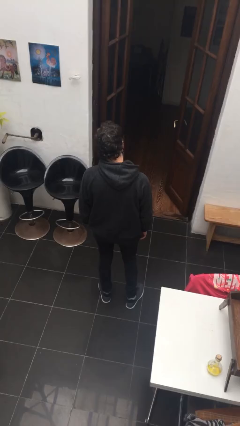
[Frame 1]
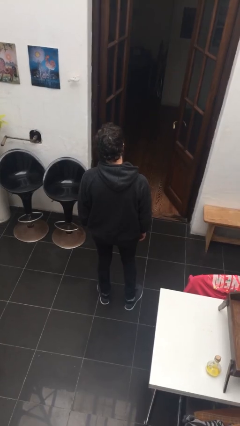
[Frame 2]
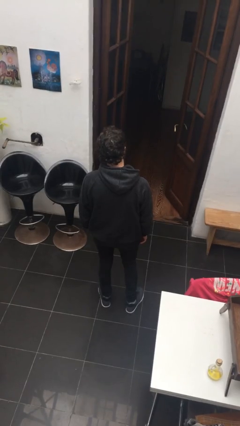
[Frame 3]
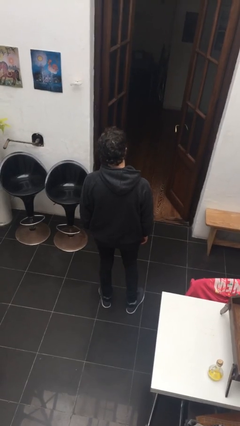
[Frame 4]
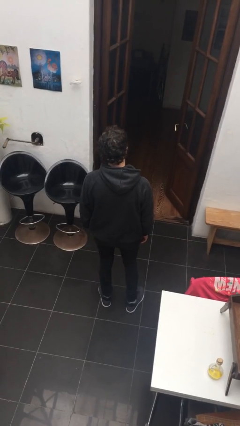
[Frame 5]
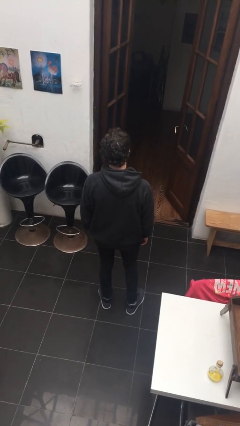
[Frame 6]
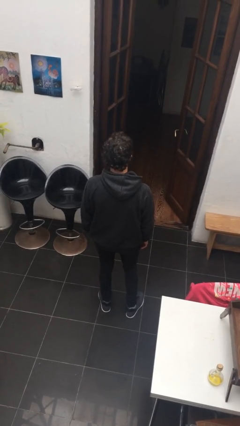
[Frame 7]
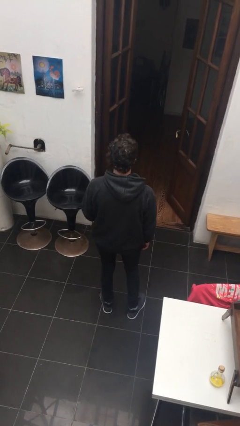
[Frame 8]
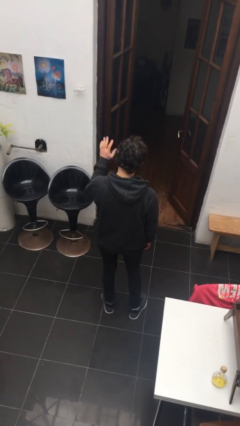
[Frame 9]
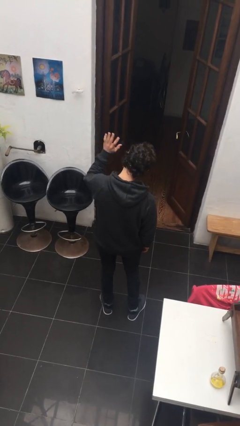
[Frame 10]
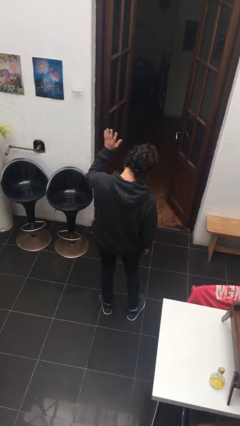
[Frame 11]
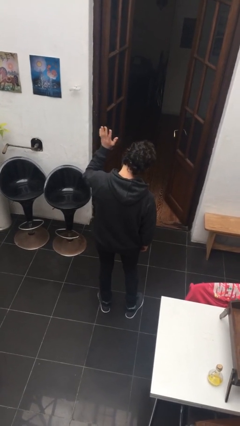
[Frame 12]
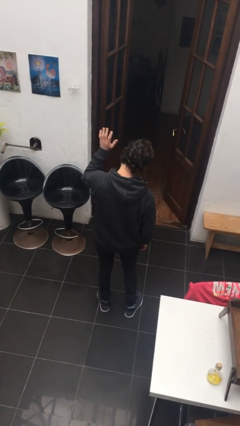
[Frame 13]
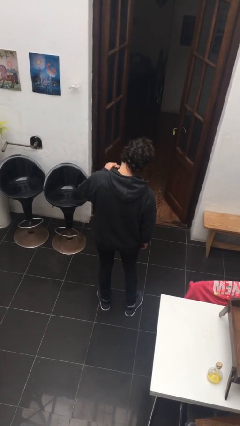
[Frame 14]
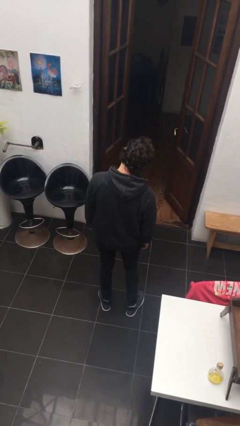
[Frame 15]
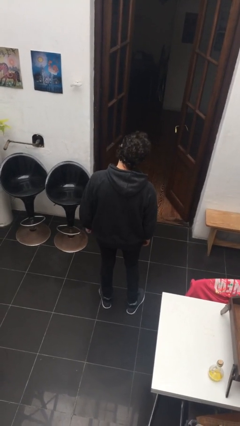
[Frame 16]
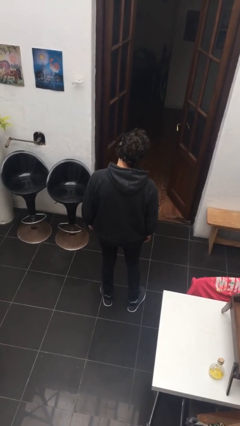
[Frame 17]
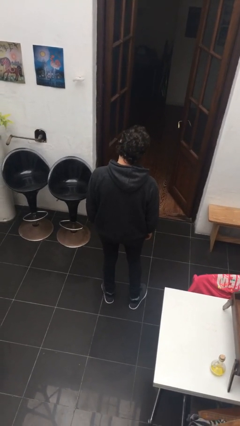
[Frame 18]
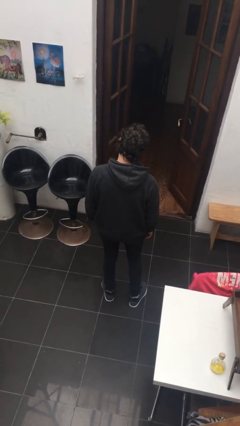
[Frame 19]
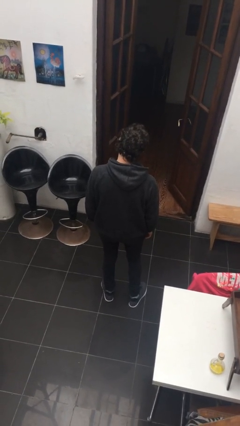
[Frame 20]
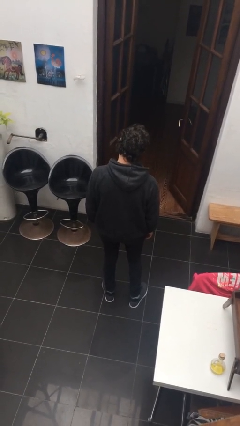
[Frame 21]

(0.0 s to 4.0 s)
person waves at person

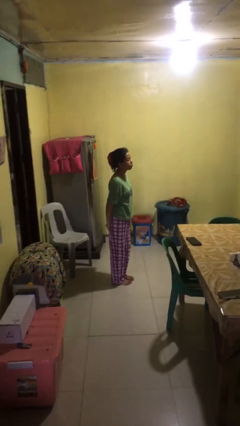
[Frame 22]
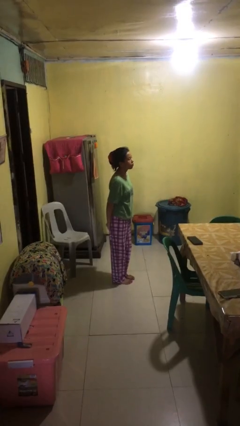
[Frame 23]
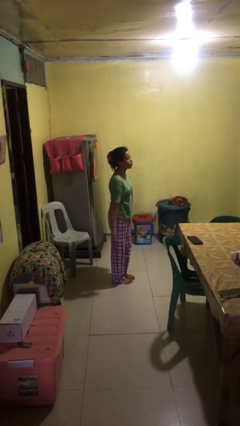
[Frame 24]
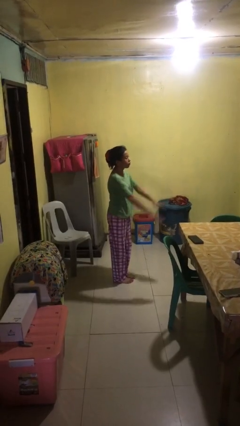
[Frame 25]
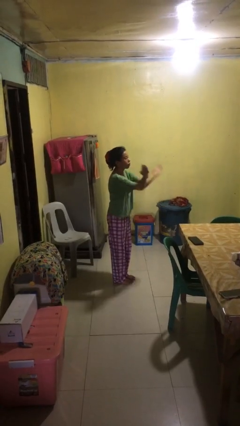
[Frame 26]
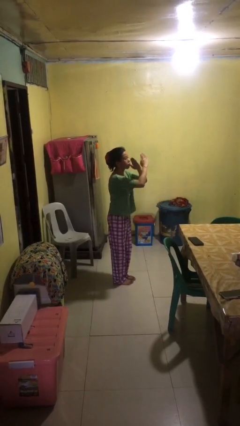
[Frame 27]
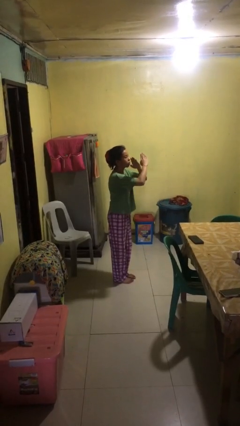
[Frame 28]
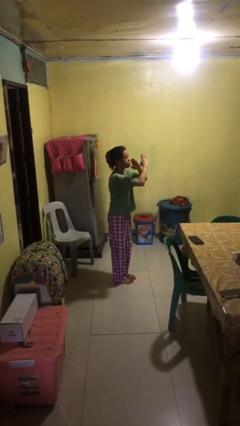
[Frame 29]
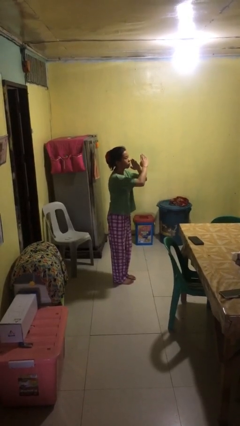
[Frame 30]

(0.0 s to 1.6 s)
person gestures arms x

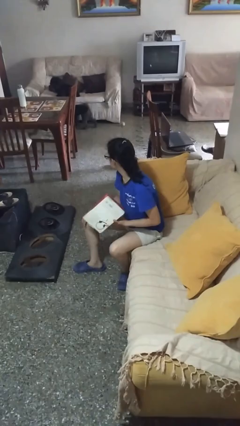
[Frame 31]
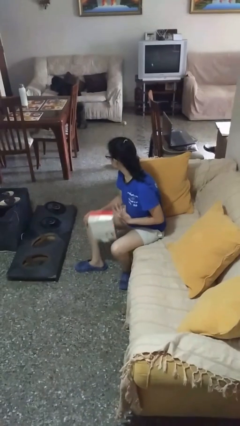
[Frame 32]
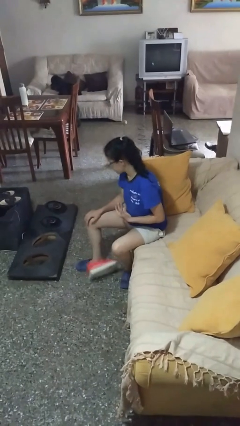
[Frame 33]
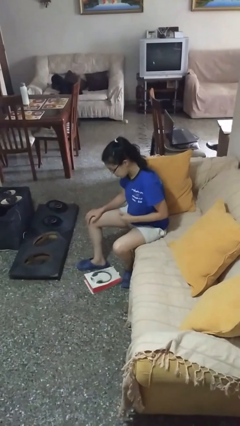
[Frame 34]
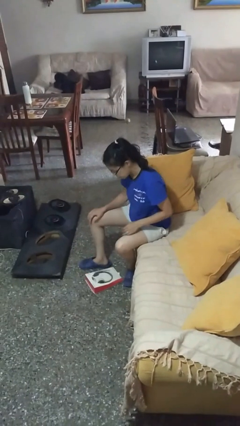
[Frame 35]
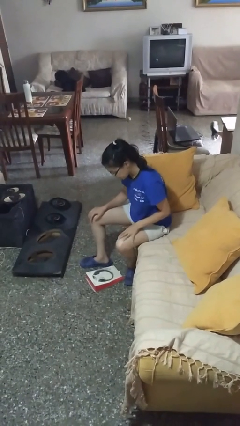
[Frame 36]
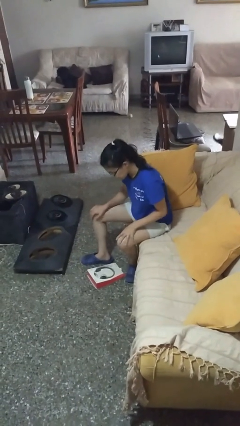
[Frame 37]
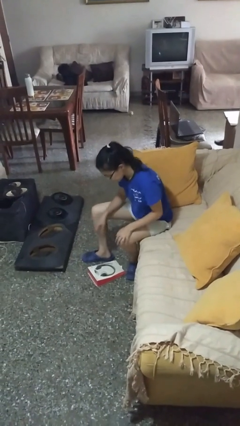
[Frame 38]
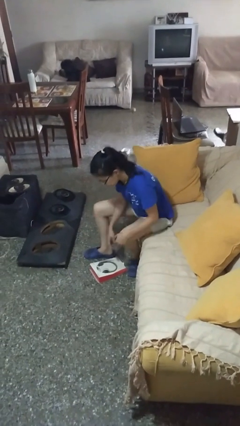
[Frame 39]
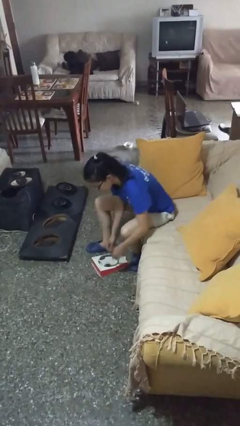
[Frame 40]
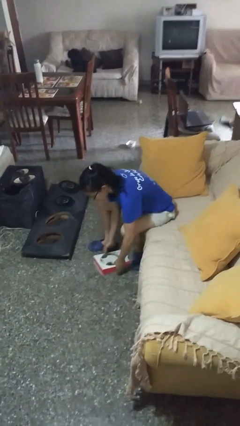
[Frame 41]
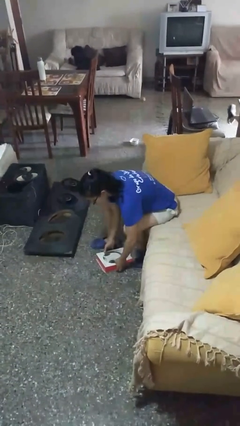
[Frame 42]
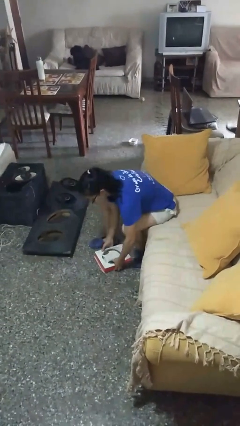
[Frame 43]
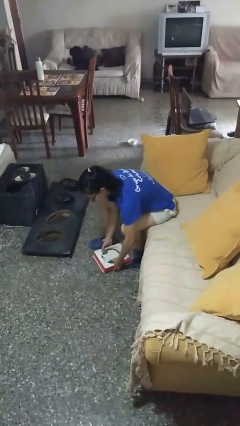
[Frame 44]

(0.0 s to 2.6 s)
person drops object

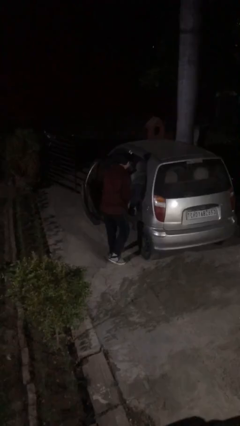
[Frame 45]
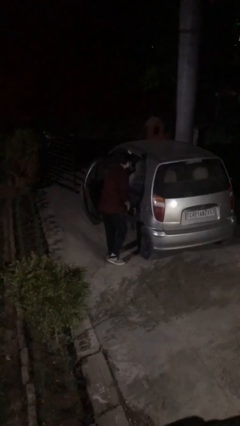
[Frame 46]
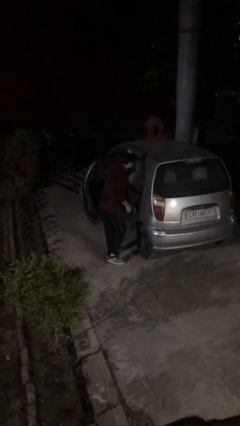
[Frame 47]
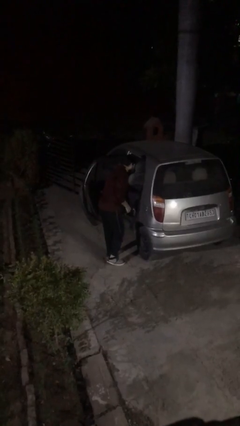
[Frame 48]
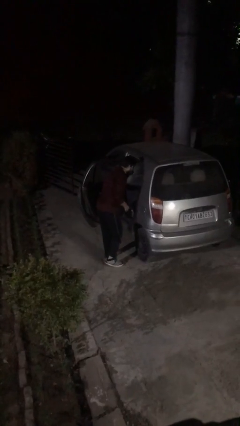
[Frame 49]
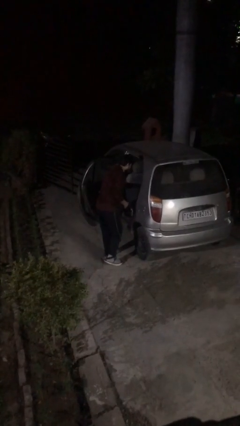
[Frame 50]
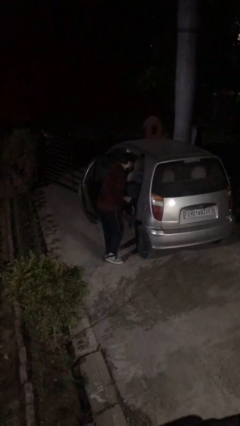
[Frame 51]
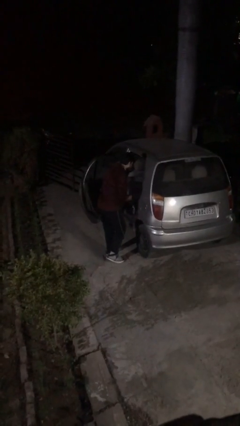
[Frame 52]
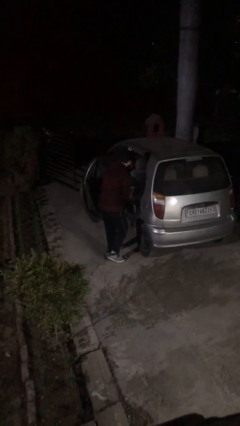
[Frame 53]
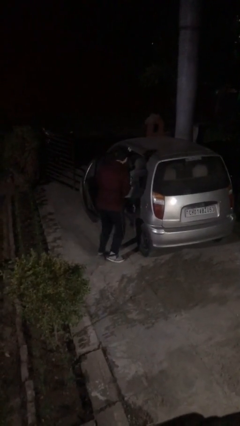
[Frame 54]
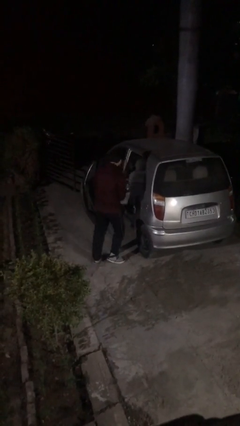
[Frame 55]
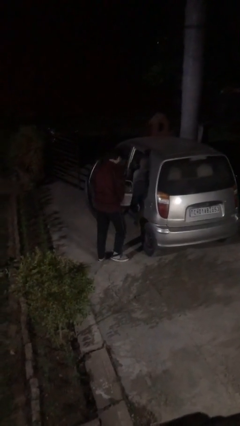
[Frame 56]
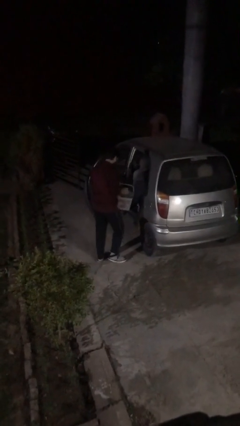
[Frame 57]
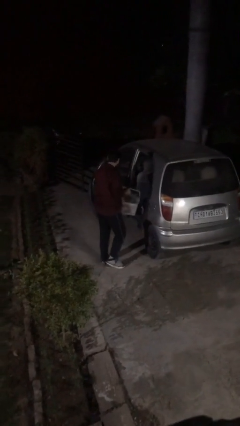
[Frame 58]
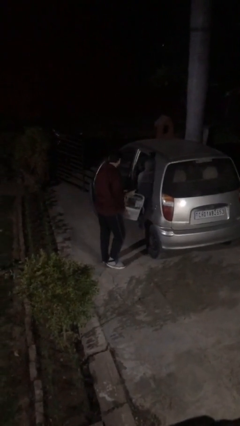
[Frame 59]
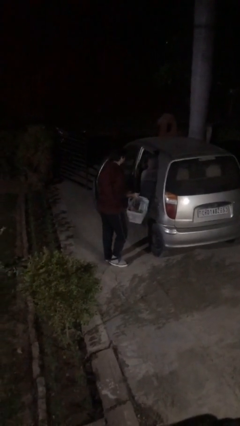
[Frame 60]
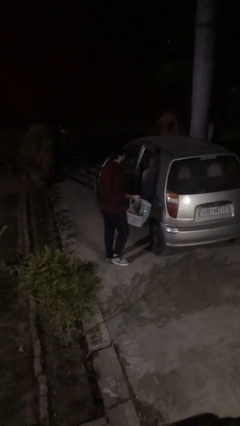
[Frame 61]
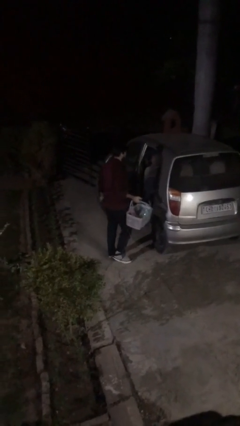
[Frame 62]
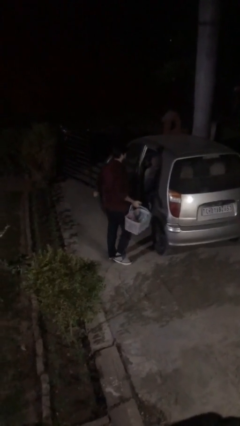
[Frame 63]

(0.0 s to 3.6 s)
person unloads car

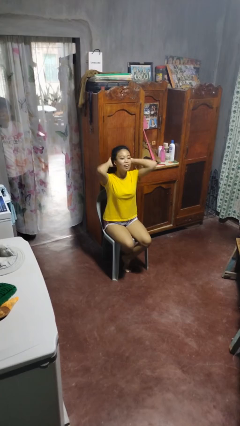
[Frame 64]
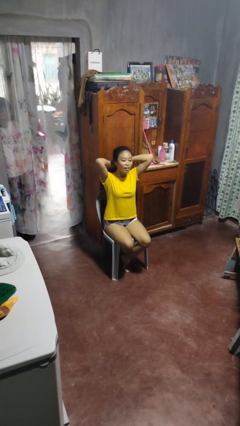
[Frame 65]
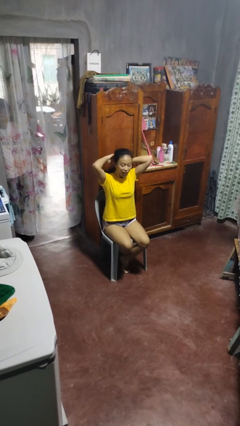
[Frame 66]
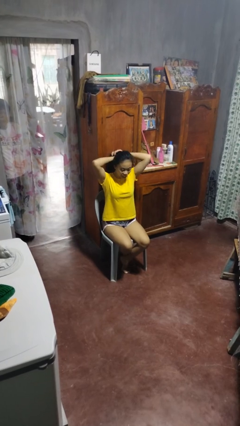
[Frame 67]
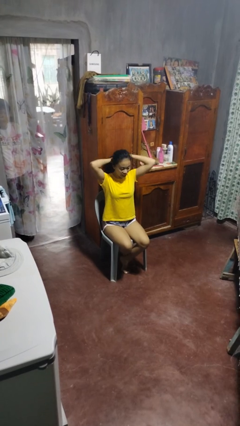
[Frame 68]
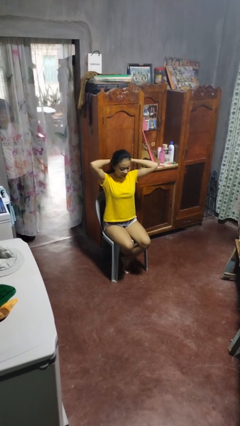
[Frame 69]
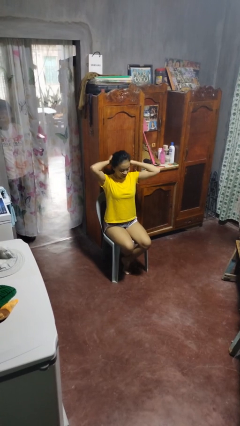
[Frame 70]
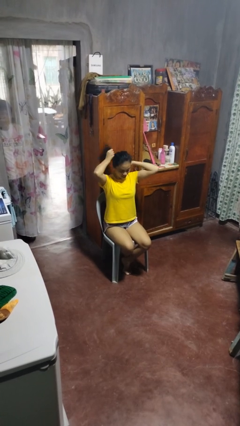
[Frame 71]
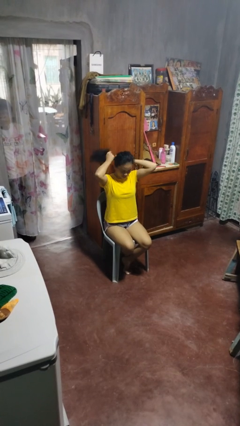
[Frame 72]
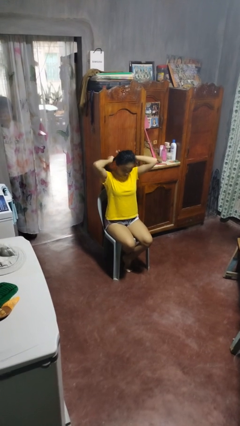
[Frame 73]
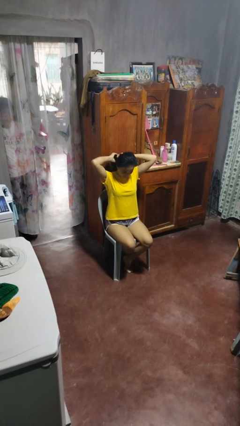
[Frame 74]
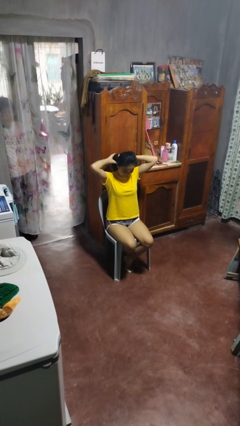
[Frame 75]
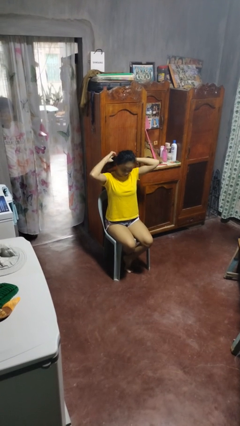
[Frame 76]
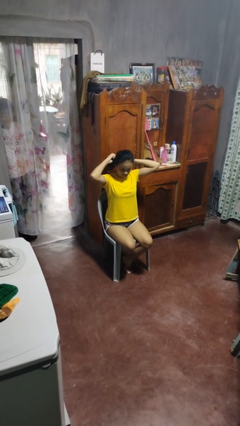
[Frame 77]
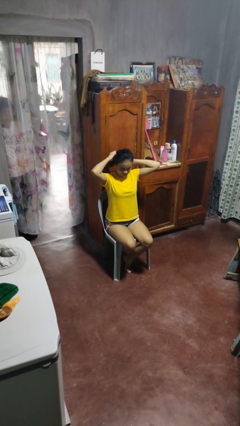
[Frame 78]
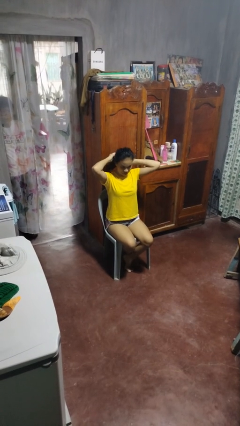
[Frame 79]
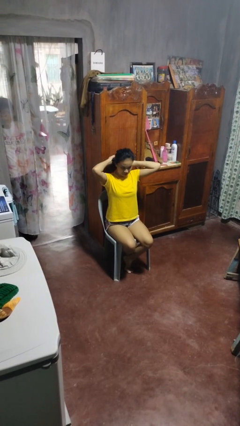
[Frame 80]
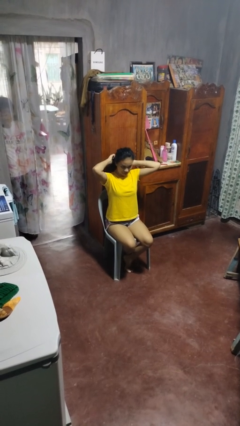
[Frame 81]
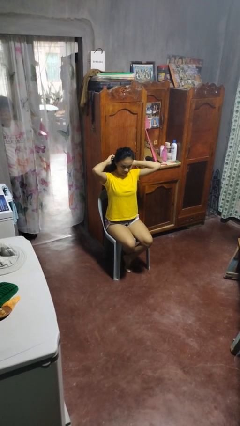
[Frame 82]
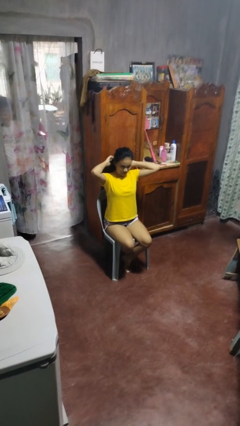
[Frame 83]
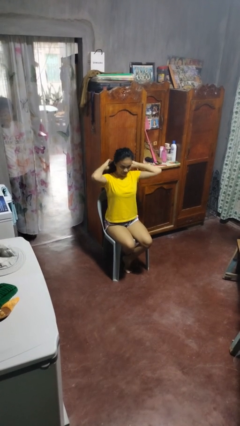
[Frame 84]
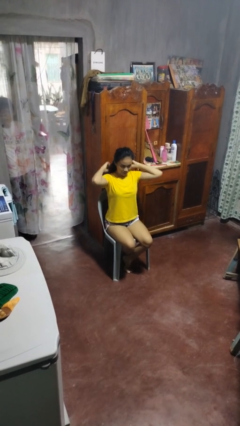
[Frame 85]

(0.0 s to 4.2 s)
person puts hair in ponytail

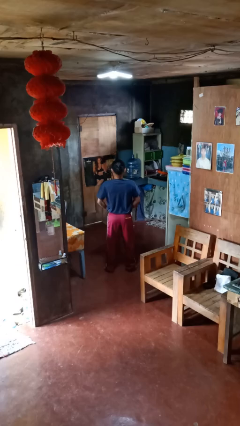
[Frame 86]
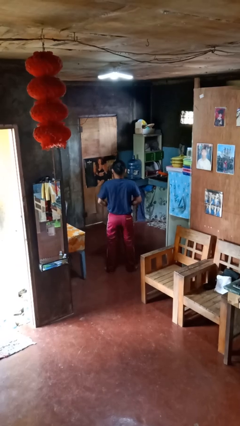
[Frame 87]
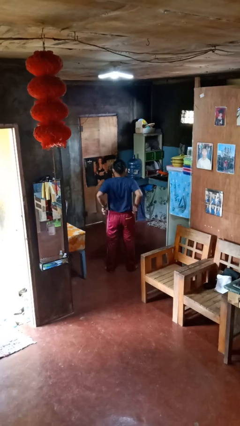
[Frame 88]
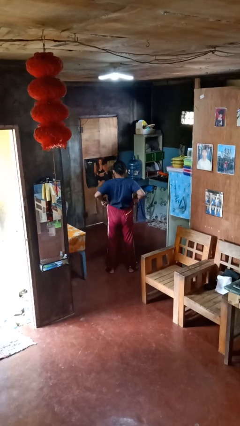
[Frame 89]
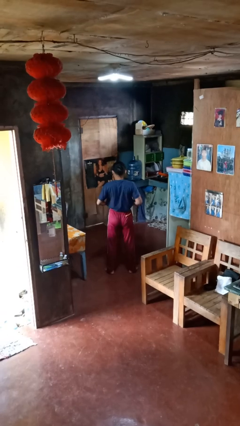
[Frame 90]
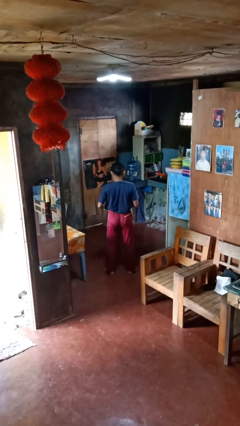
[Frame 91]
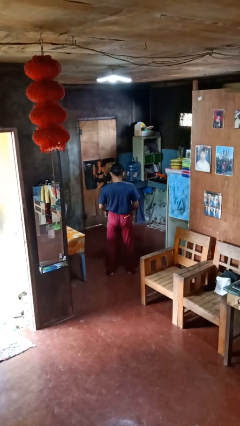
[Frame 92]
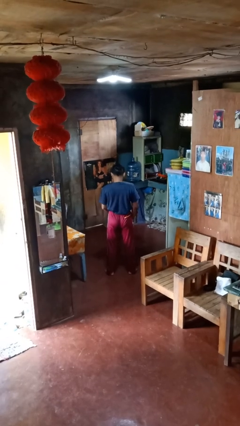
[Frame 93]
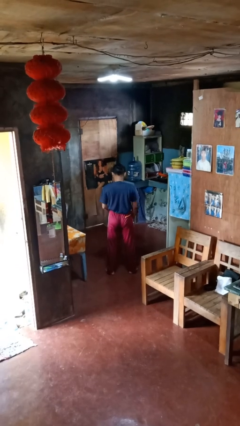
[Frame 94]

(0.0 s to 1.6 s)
person hikes up pants

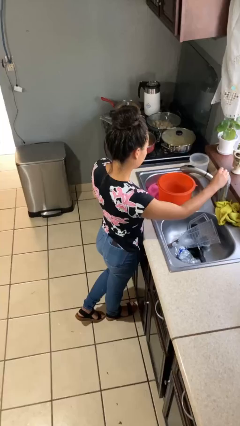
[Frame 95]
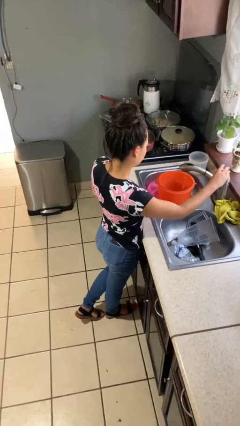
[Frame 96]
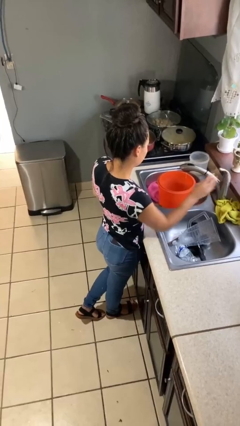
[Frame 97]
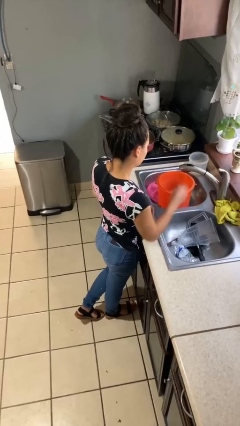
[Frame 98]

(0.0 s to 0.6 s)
person turns on faucet
